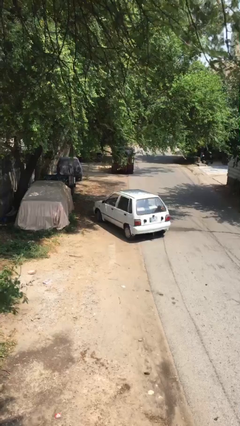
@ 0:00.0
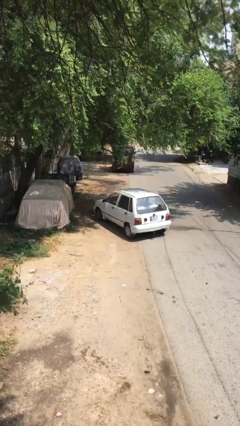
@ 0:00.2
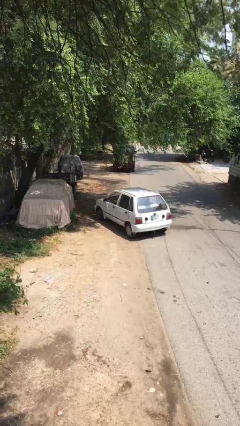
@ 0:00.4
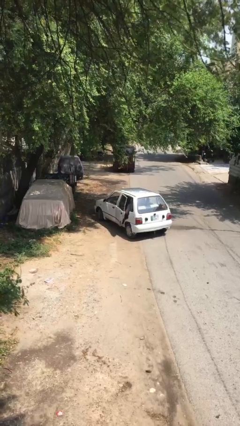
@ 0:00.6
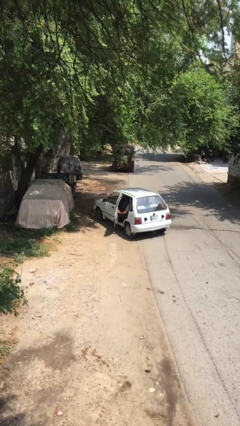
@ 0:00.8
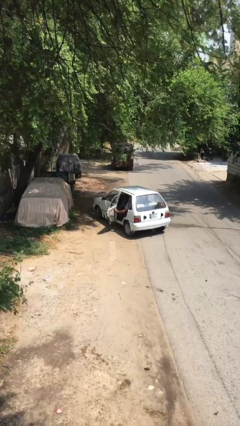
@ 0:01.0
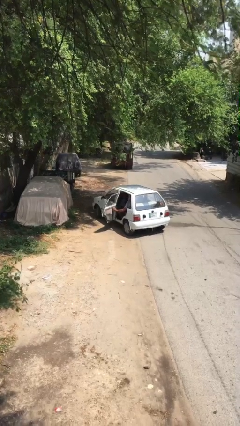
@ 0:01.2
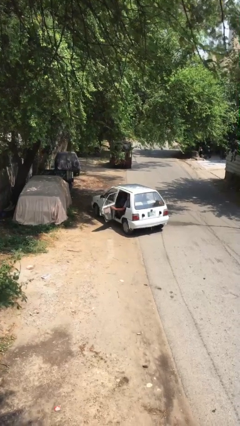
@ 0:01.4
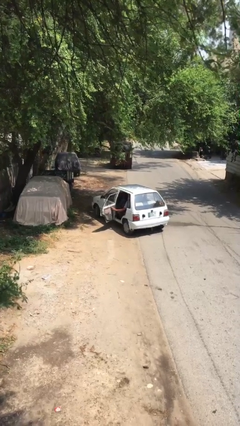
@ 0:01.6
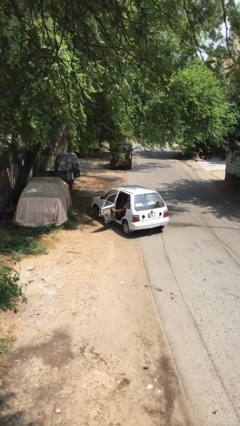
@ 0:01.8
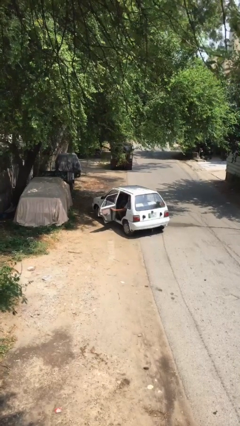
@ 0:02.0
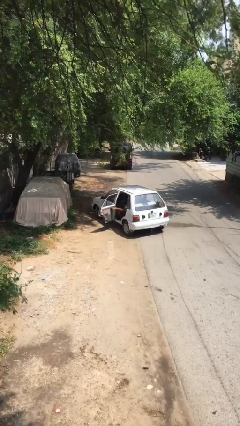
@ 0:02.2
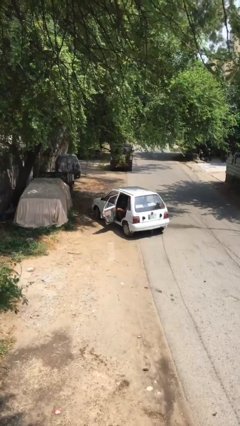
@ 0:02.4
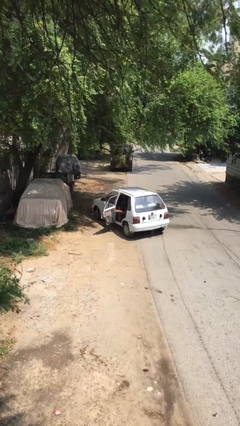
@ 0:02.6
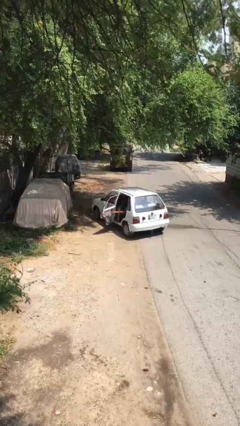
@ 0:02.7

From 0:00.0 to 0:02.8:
person opens car door

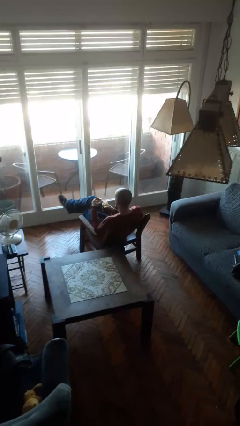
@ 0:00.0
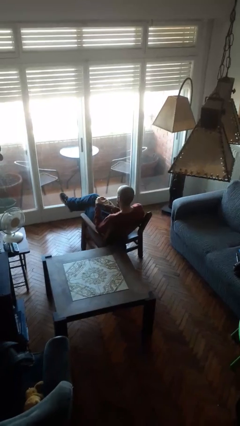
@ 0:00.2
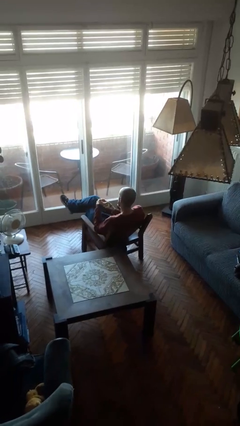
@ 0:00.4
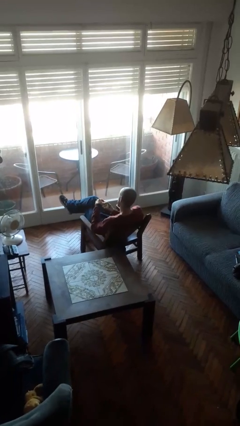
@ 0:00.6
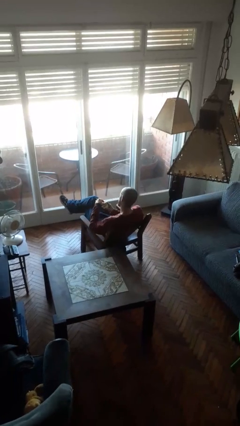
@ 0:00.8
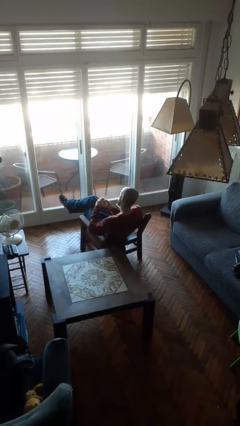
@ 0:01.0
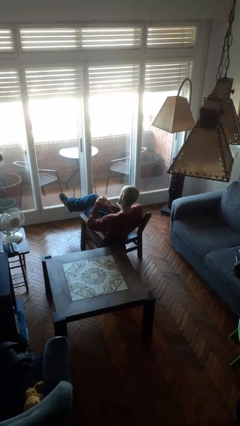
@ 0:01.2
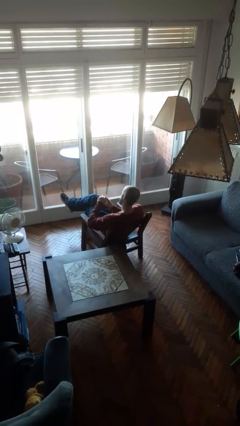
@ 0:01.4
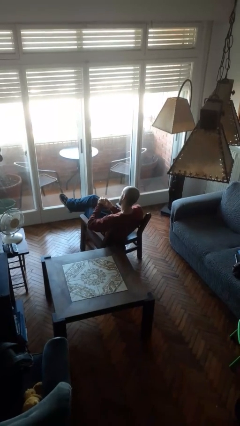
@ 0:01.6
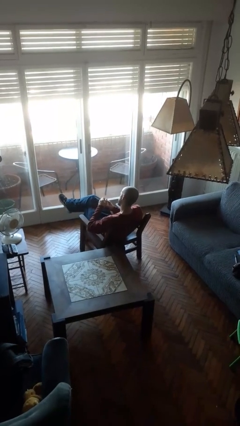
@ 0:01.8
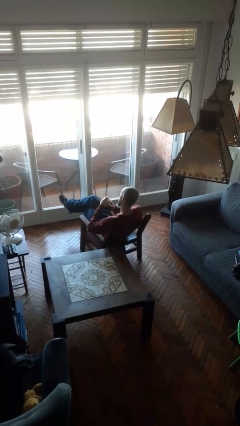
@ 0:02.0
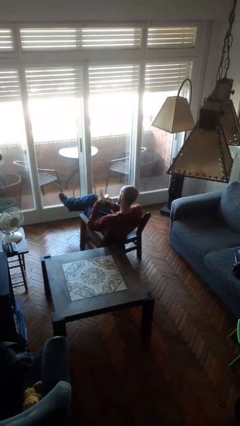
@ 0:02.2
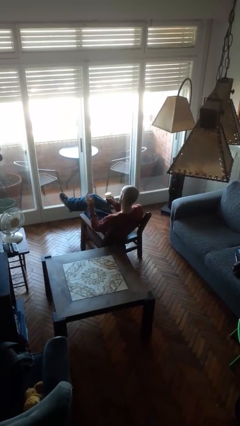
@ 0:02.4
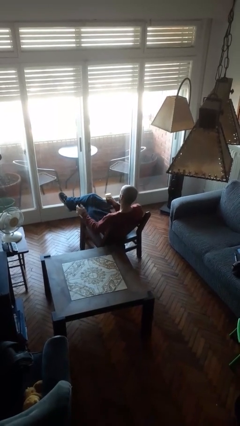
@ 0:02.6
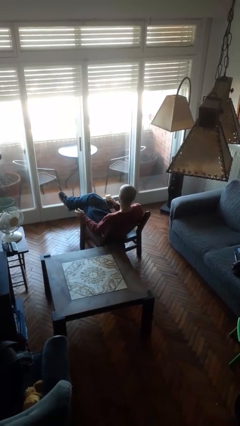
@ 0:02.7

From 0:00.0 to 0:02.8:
person closes jar

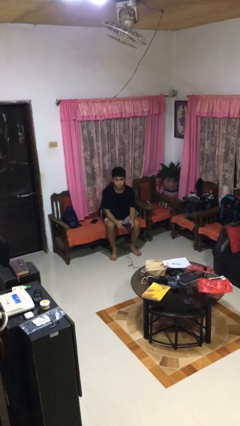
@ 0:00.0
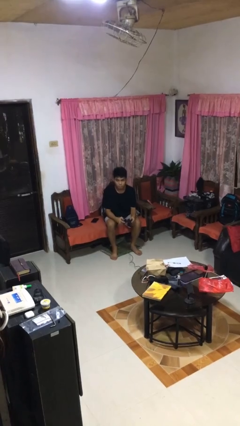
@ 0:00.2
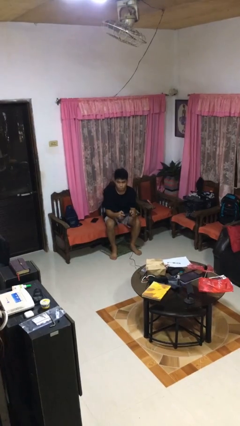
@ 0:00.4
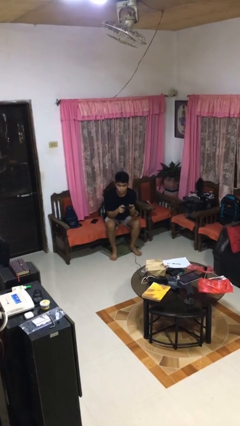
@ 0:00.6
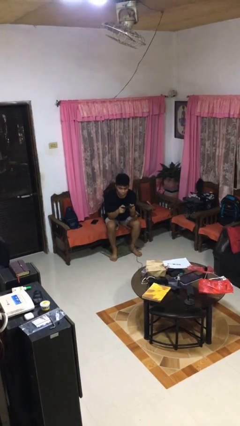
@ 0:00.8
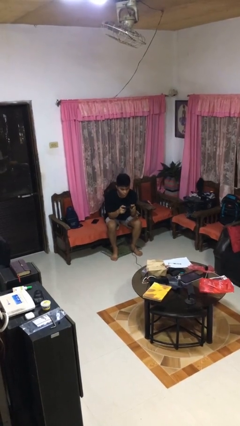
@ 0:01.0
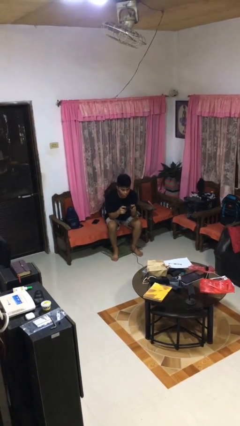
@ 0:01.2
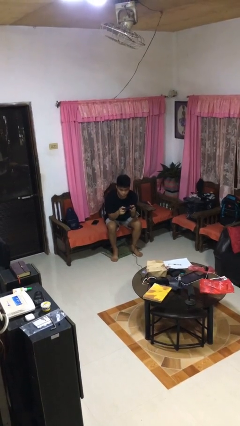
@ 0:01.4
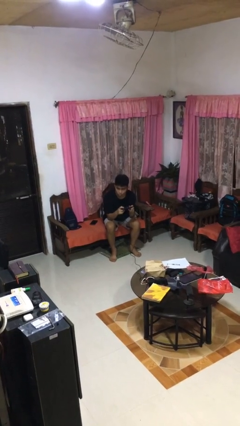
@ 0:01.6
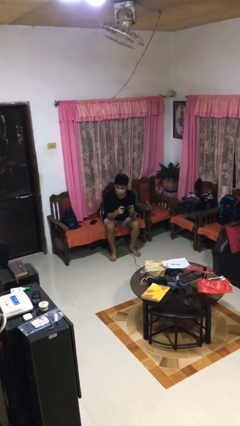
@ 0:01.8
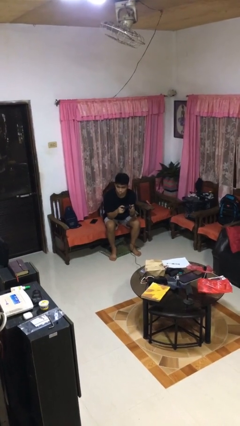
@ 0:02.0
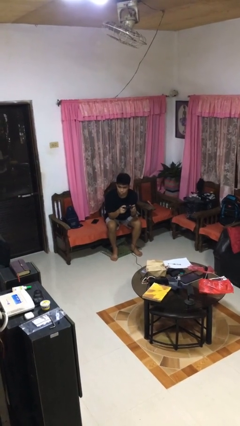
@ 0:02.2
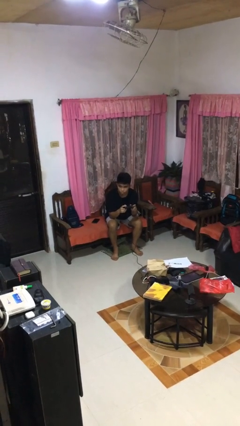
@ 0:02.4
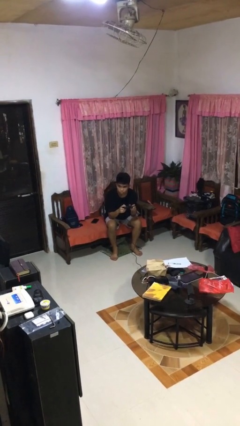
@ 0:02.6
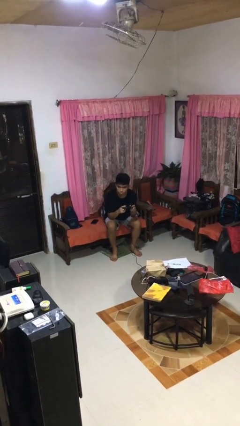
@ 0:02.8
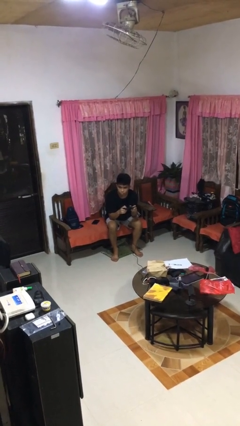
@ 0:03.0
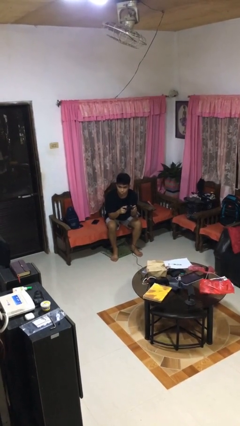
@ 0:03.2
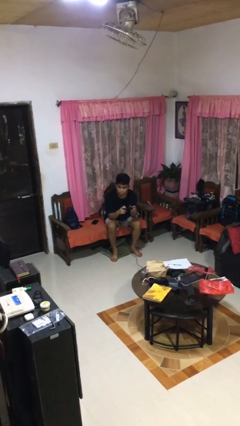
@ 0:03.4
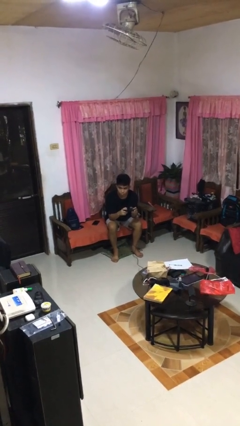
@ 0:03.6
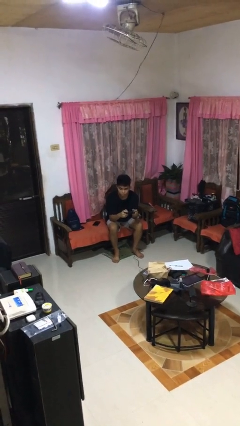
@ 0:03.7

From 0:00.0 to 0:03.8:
person interacts with handheld game

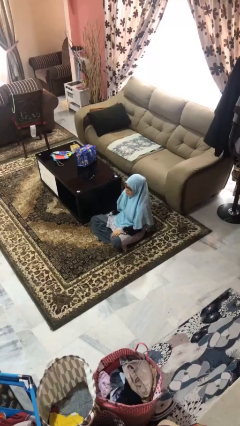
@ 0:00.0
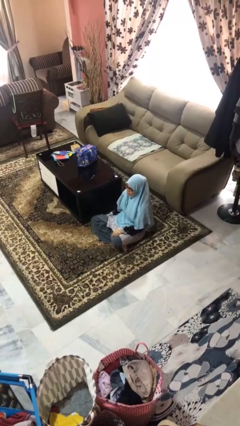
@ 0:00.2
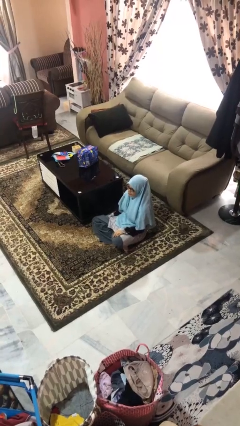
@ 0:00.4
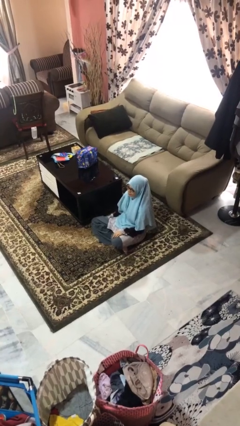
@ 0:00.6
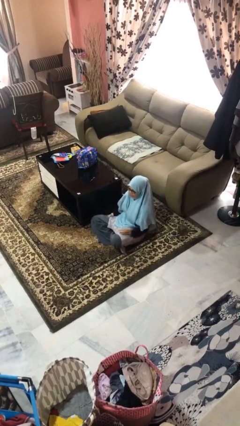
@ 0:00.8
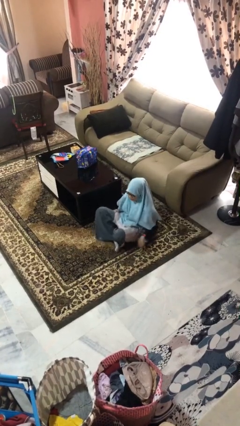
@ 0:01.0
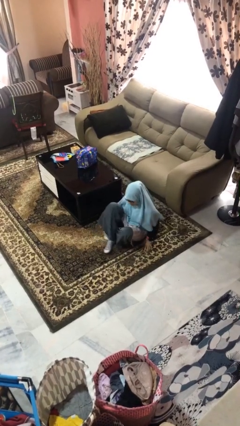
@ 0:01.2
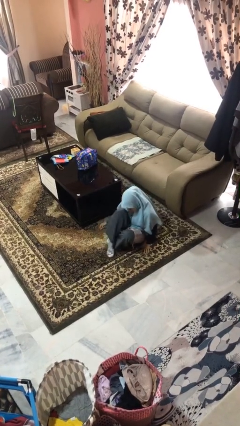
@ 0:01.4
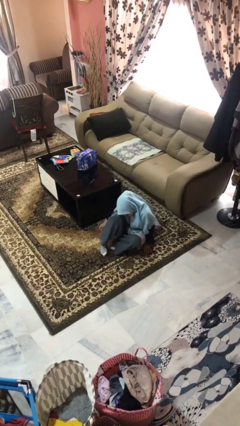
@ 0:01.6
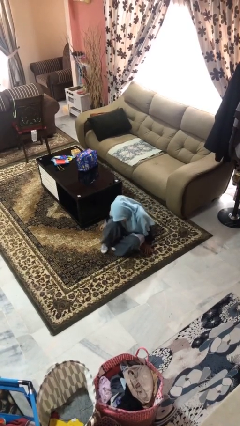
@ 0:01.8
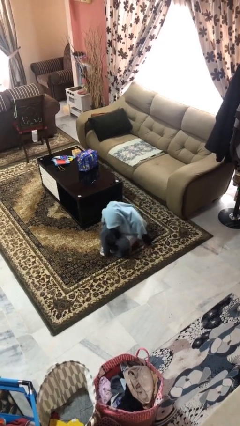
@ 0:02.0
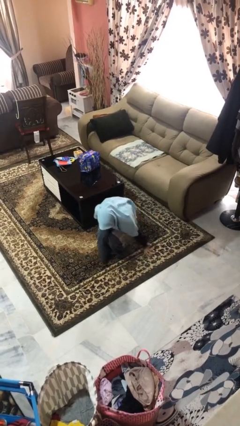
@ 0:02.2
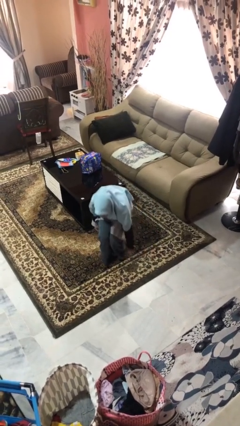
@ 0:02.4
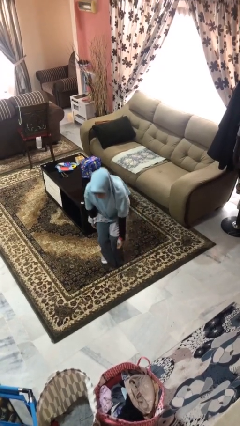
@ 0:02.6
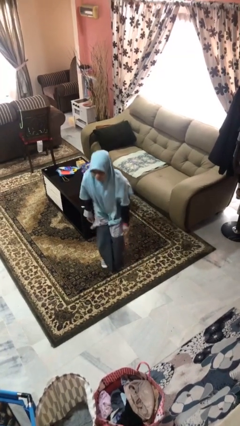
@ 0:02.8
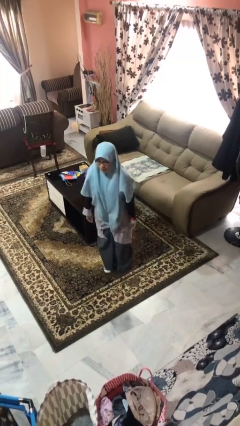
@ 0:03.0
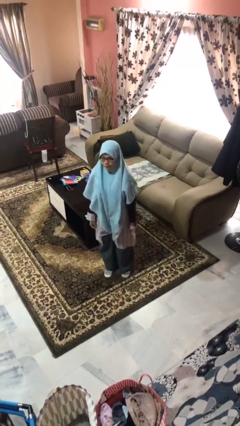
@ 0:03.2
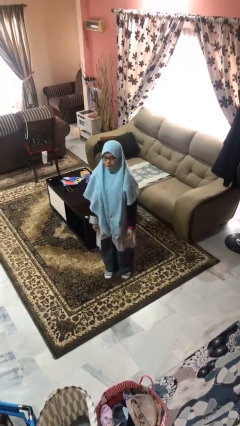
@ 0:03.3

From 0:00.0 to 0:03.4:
person stands up from floor

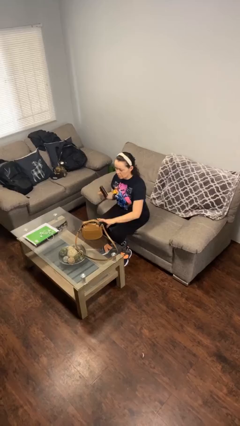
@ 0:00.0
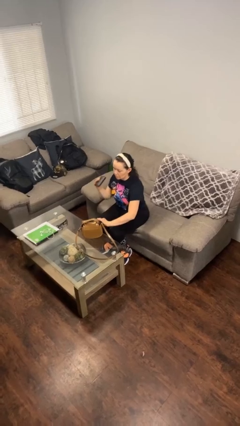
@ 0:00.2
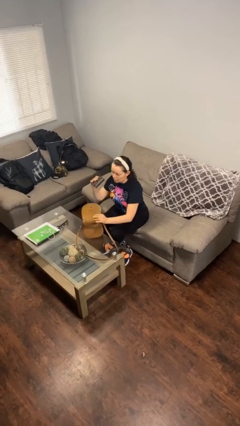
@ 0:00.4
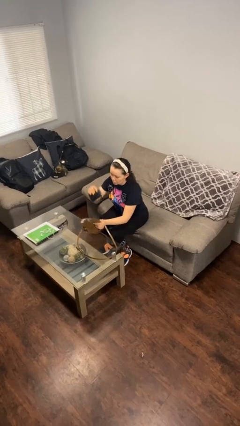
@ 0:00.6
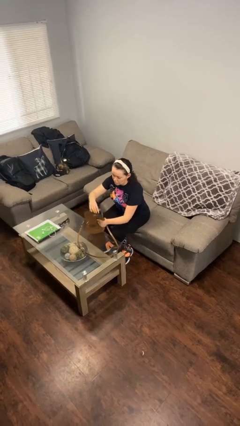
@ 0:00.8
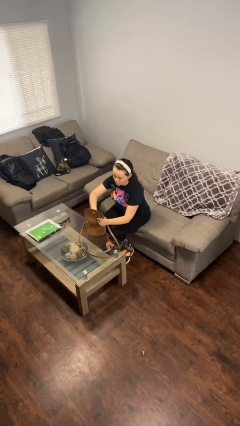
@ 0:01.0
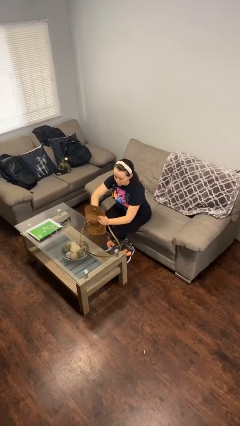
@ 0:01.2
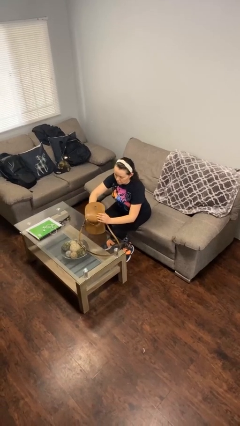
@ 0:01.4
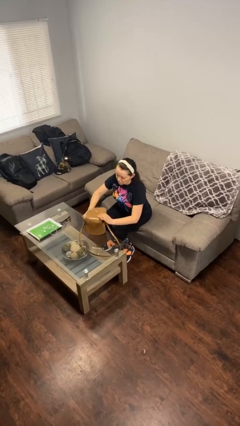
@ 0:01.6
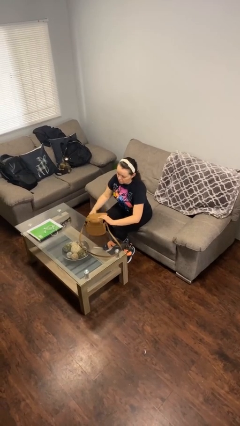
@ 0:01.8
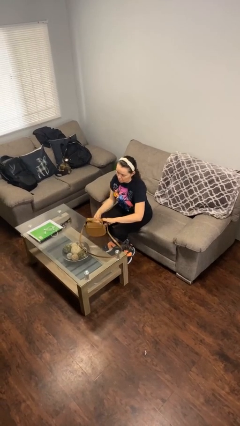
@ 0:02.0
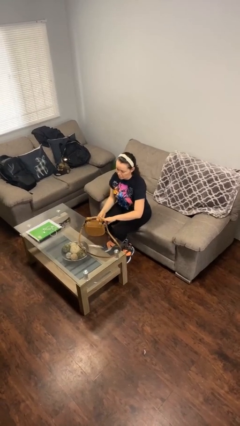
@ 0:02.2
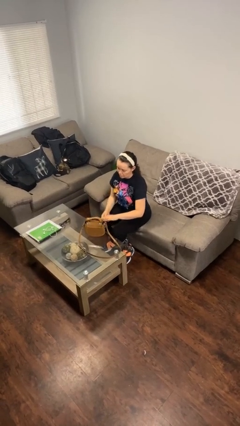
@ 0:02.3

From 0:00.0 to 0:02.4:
person puts object into purse

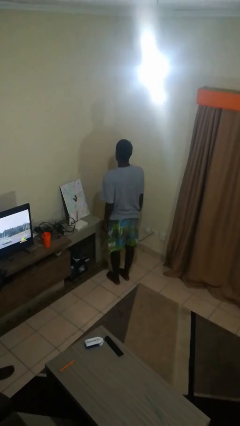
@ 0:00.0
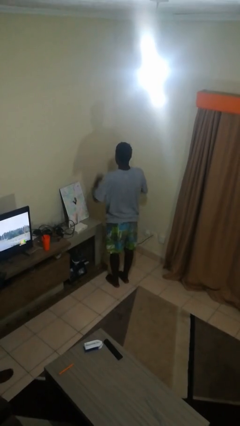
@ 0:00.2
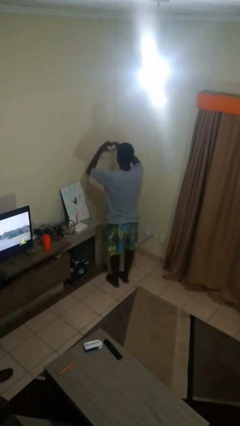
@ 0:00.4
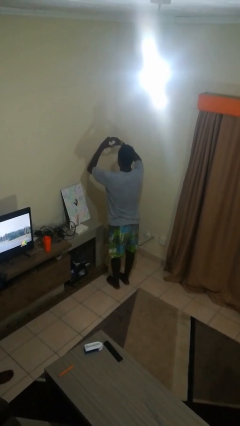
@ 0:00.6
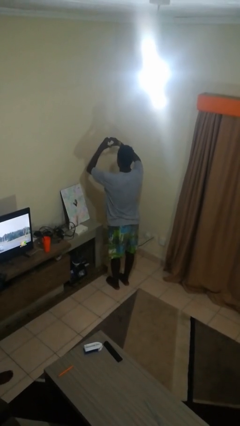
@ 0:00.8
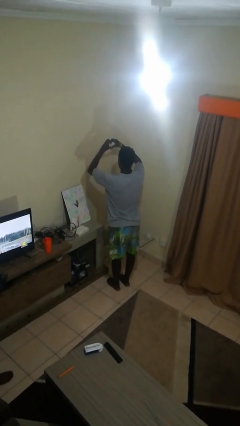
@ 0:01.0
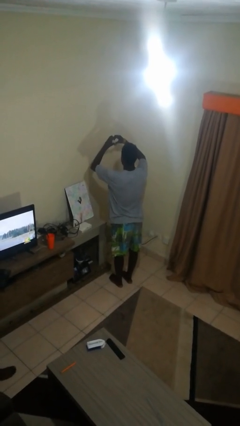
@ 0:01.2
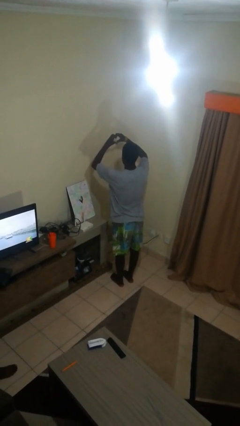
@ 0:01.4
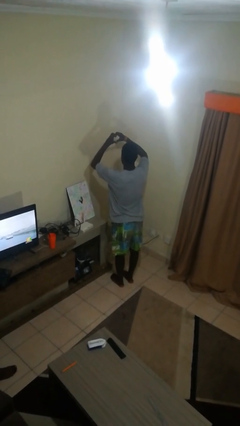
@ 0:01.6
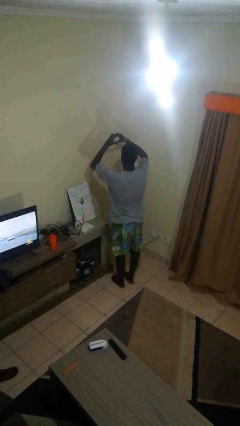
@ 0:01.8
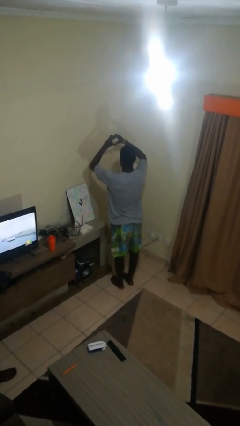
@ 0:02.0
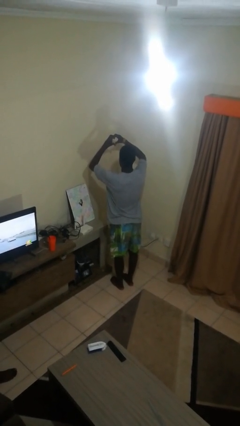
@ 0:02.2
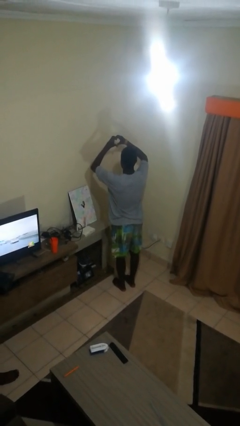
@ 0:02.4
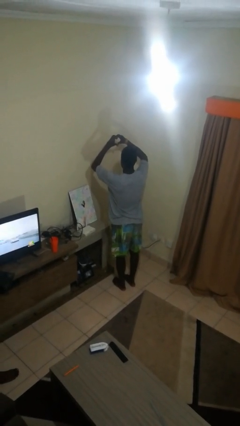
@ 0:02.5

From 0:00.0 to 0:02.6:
person gestures heart
